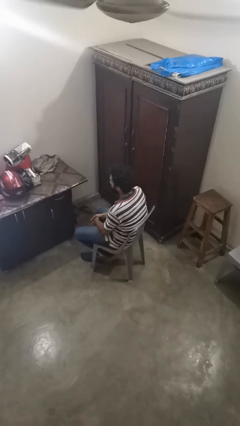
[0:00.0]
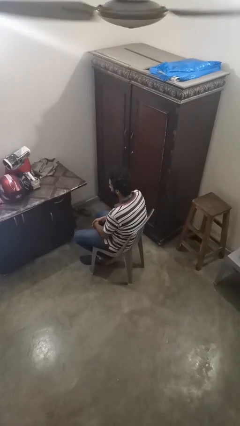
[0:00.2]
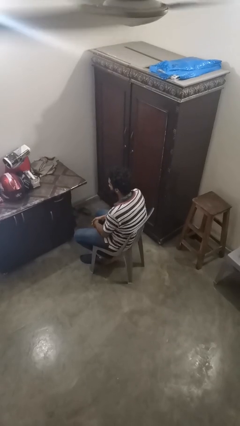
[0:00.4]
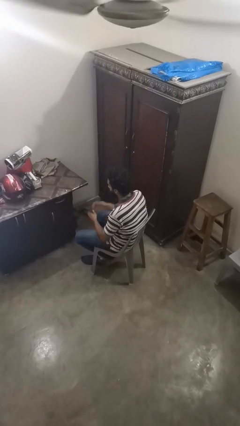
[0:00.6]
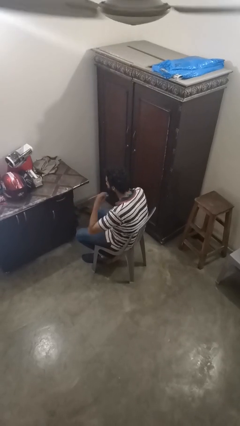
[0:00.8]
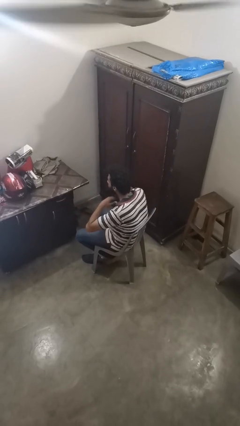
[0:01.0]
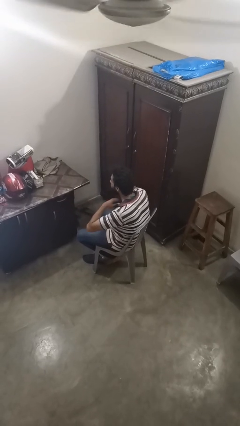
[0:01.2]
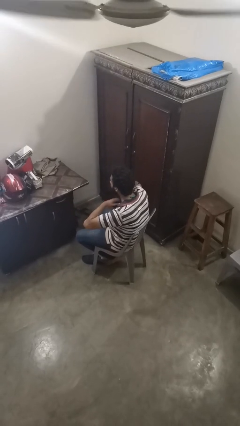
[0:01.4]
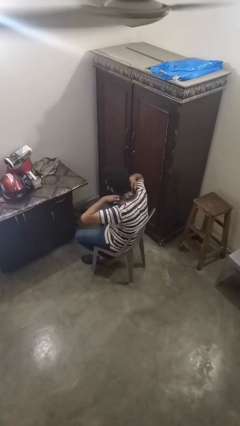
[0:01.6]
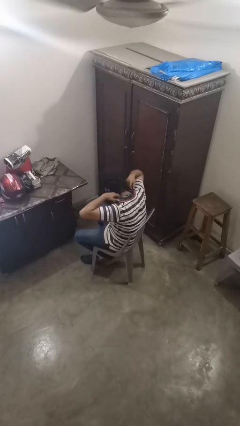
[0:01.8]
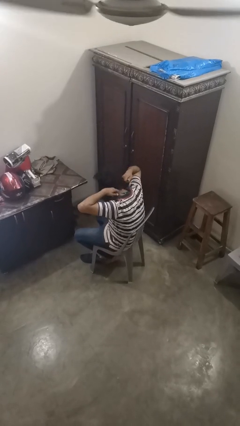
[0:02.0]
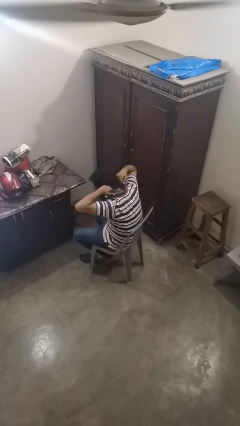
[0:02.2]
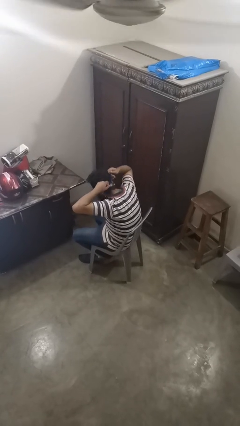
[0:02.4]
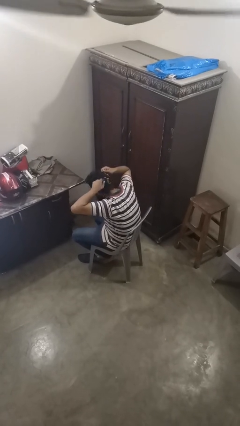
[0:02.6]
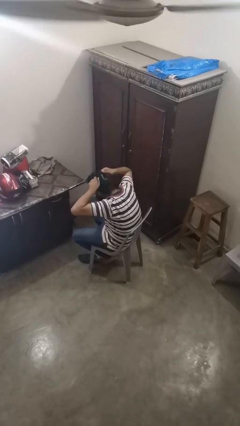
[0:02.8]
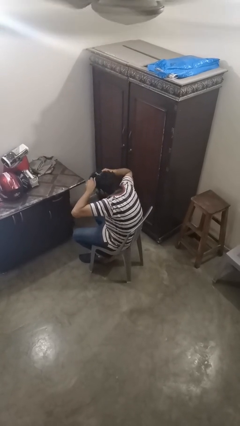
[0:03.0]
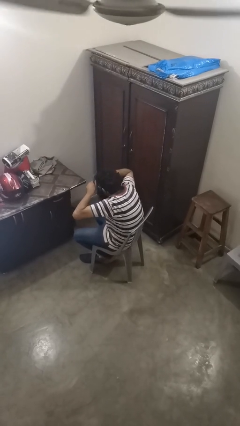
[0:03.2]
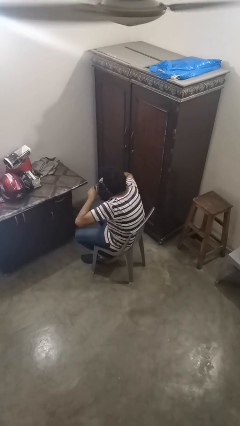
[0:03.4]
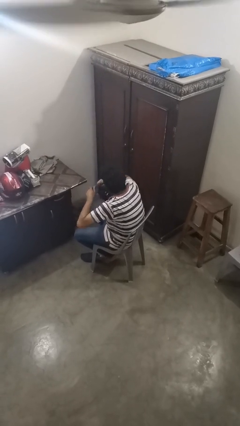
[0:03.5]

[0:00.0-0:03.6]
person takes off necklace

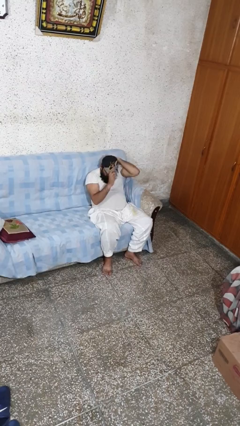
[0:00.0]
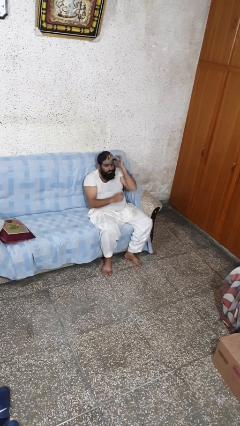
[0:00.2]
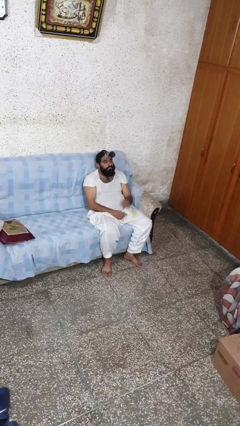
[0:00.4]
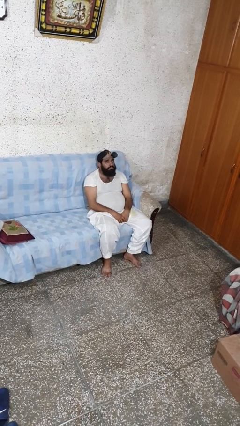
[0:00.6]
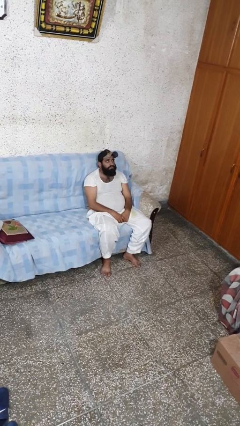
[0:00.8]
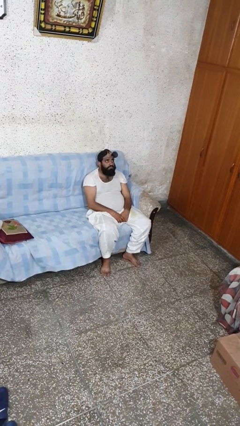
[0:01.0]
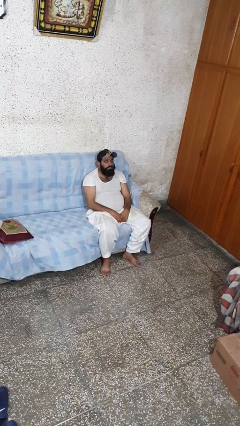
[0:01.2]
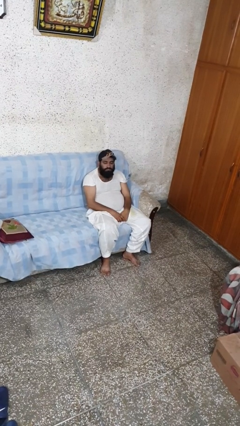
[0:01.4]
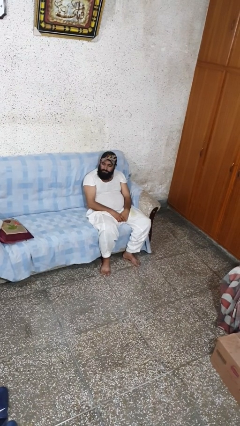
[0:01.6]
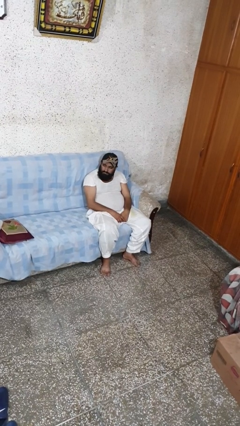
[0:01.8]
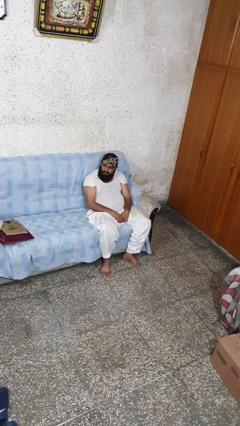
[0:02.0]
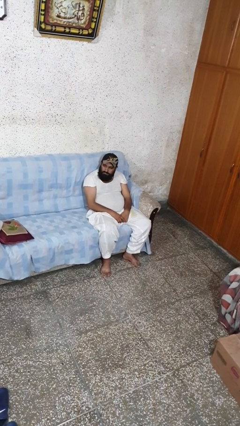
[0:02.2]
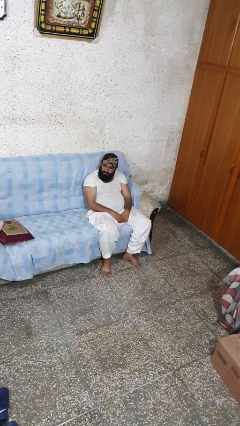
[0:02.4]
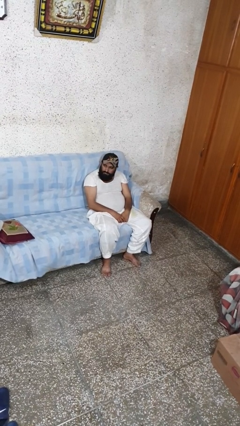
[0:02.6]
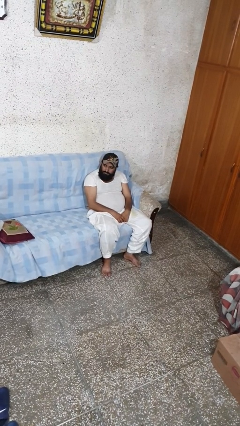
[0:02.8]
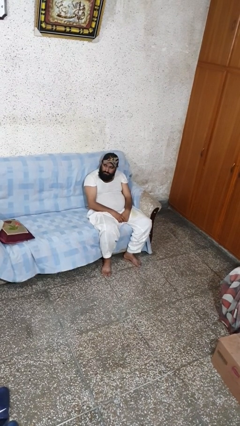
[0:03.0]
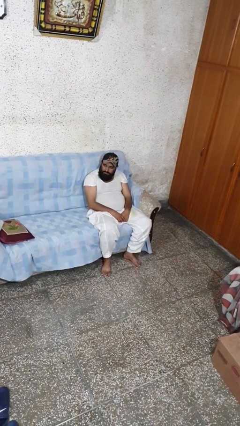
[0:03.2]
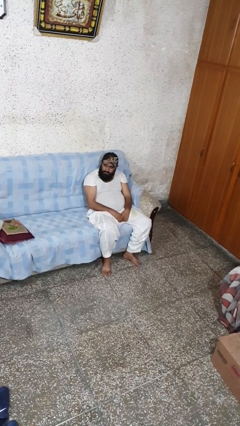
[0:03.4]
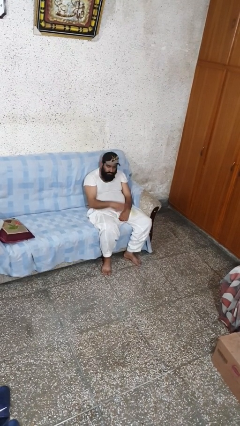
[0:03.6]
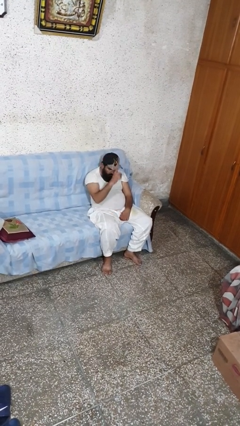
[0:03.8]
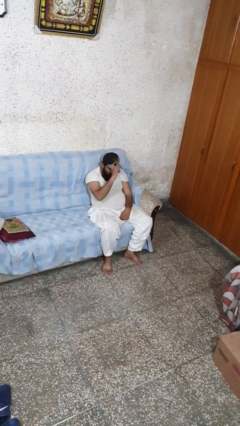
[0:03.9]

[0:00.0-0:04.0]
person puts on hat

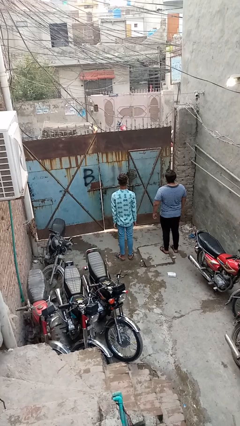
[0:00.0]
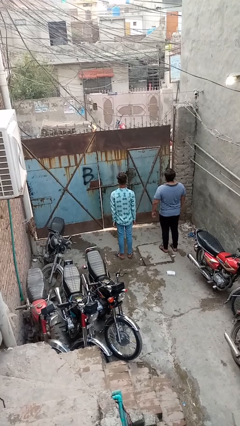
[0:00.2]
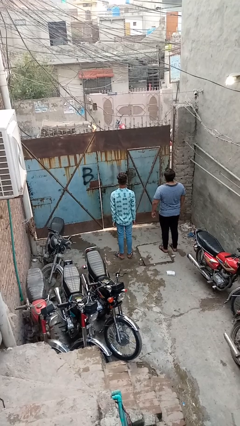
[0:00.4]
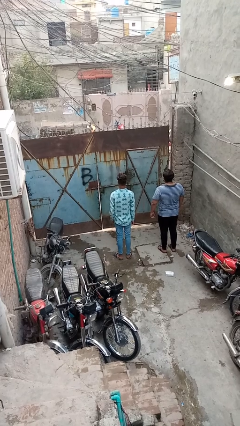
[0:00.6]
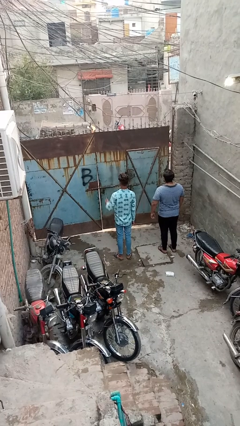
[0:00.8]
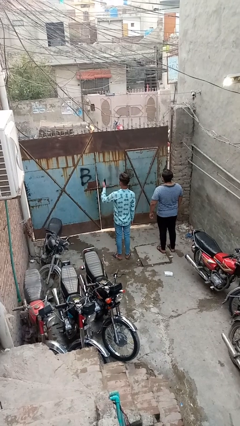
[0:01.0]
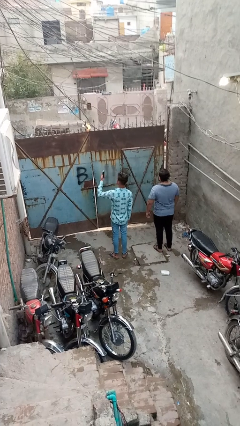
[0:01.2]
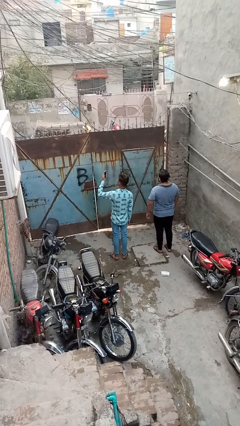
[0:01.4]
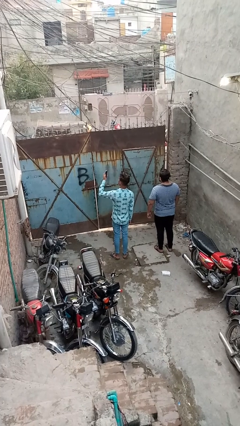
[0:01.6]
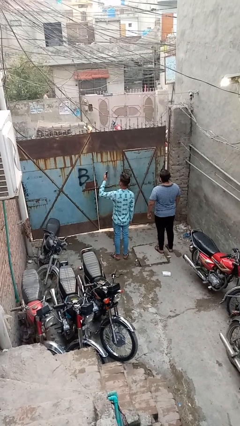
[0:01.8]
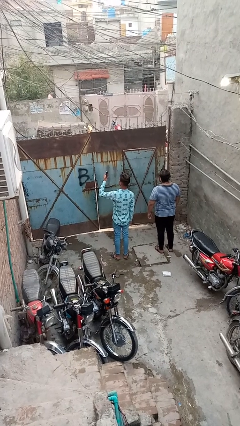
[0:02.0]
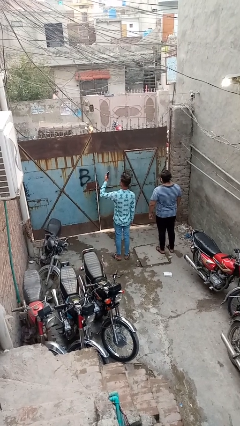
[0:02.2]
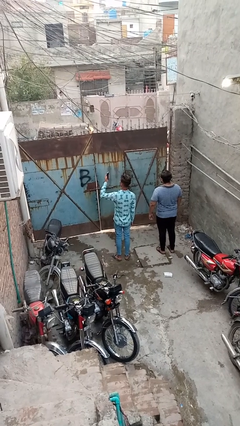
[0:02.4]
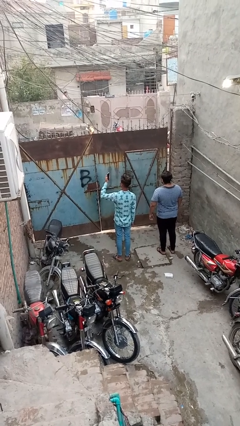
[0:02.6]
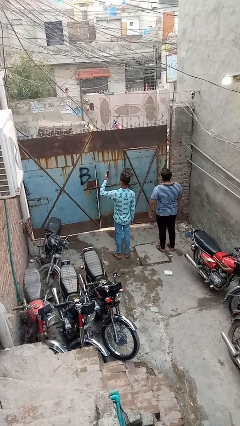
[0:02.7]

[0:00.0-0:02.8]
person takes selfie with person

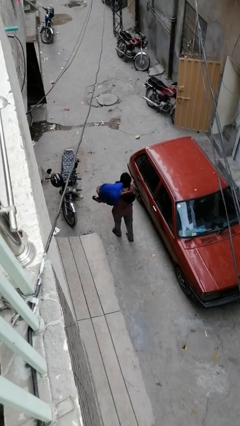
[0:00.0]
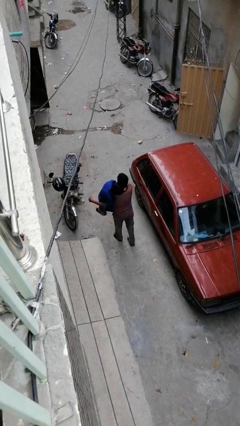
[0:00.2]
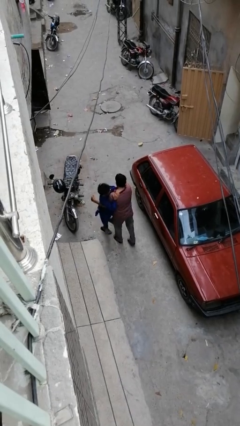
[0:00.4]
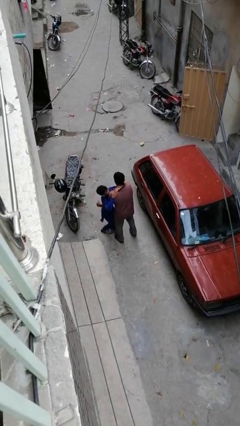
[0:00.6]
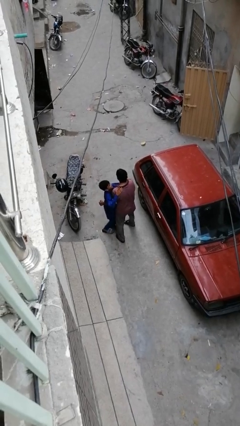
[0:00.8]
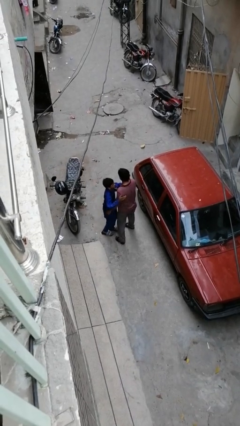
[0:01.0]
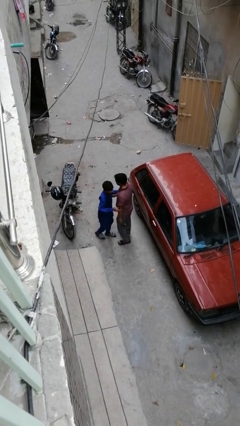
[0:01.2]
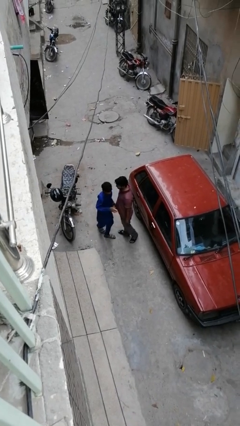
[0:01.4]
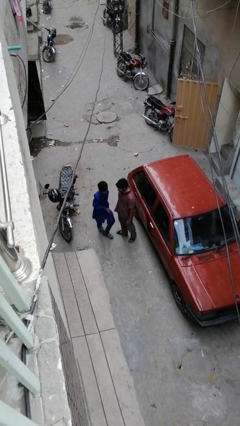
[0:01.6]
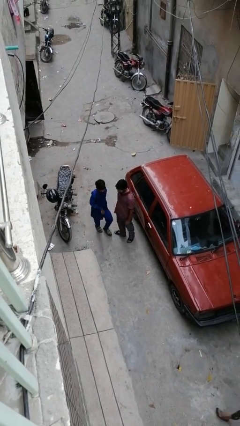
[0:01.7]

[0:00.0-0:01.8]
person puts down person

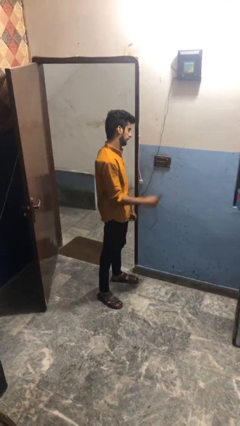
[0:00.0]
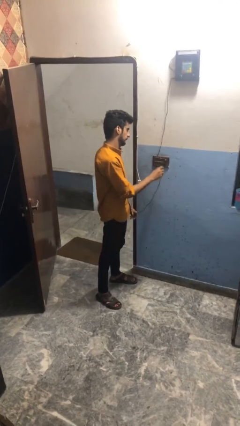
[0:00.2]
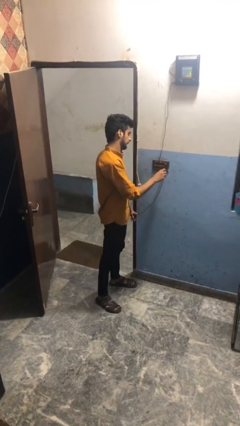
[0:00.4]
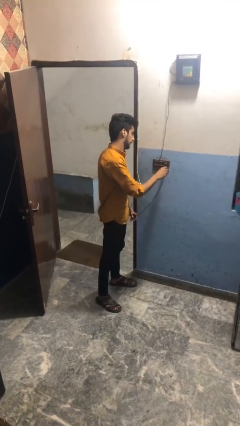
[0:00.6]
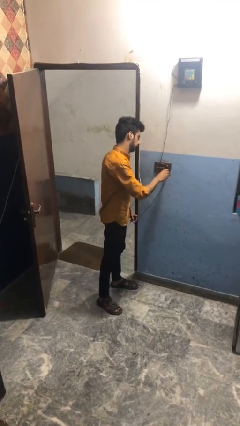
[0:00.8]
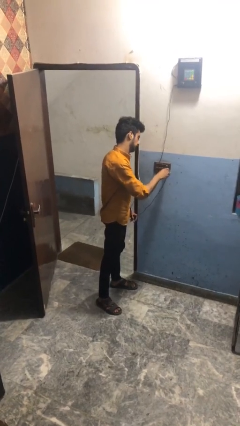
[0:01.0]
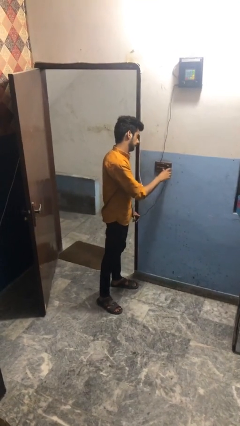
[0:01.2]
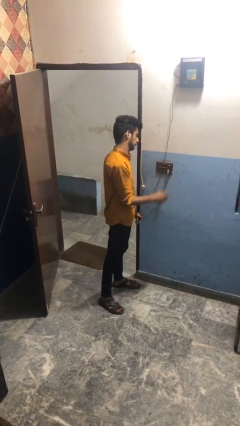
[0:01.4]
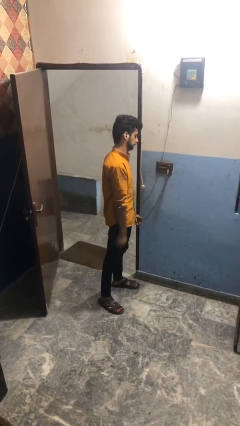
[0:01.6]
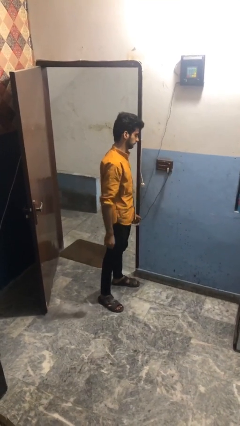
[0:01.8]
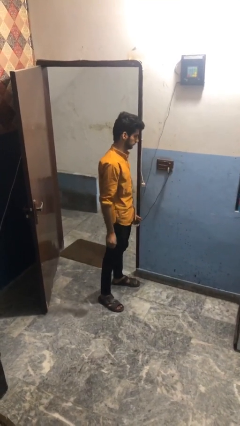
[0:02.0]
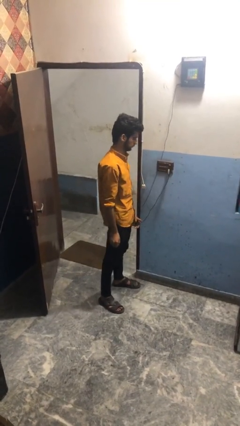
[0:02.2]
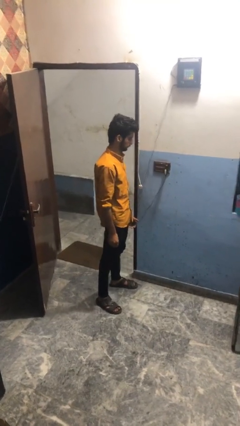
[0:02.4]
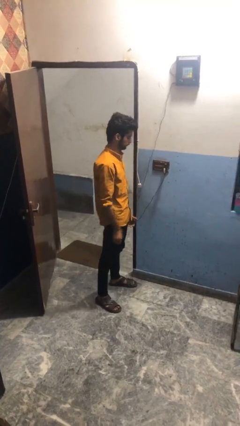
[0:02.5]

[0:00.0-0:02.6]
person plugs into electrical socket

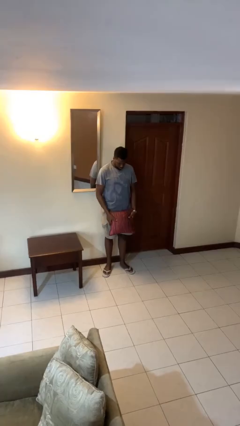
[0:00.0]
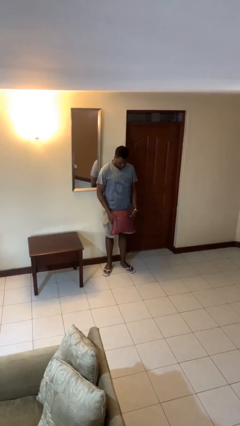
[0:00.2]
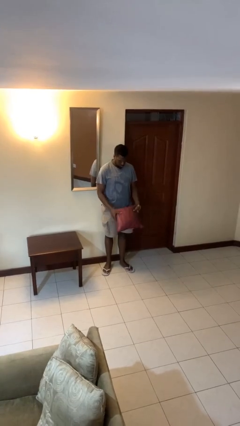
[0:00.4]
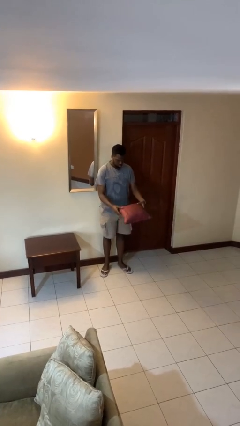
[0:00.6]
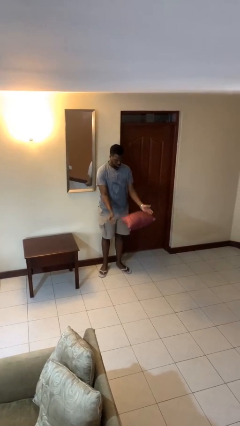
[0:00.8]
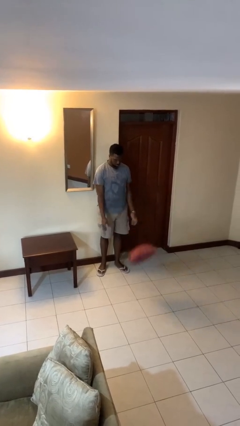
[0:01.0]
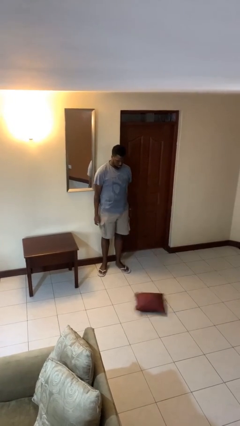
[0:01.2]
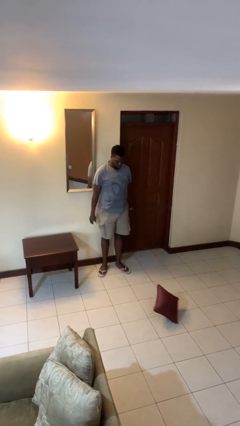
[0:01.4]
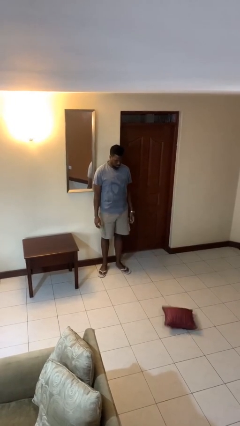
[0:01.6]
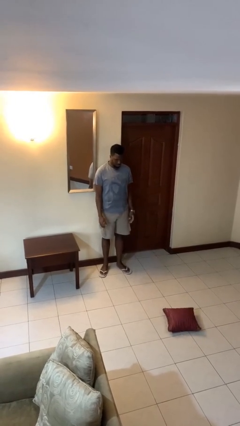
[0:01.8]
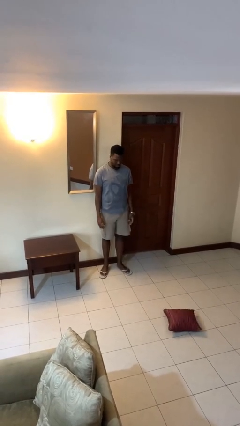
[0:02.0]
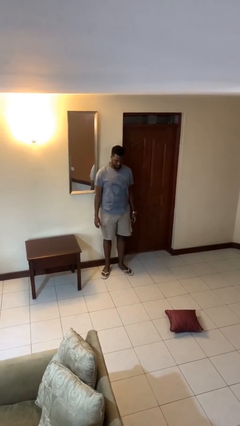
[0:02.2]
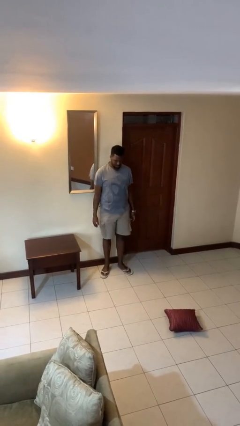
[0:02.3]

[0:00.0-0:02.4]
person throws object to ground
